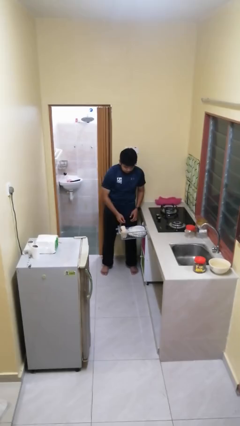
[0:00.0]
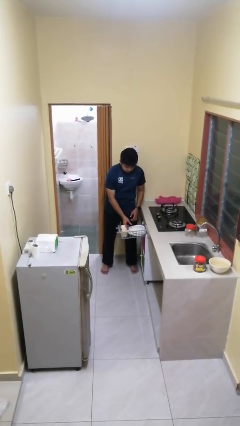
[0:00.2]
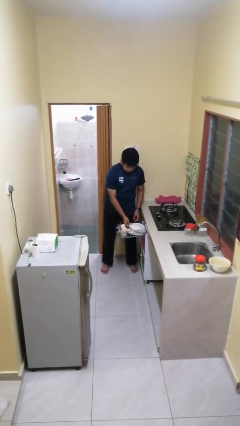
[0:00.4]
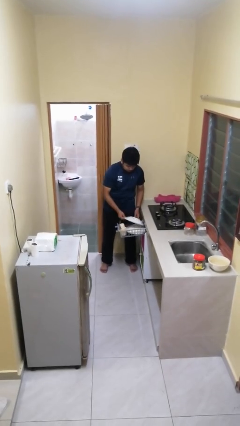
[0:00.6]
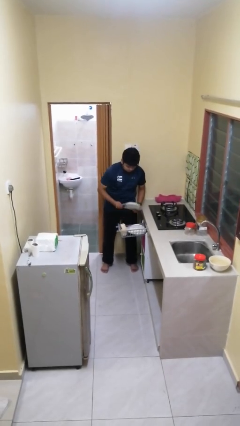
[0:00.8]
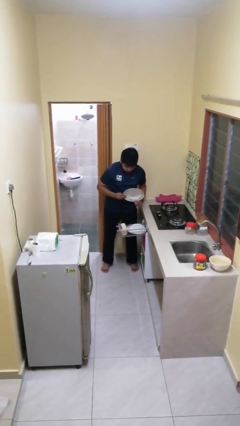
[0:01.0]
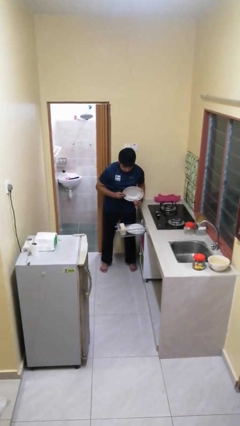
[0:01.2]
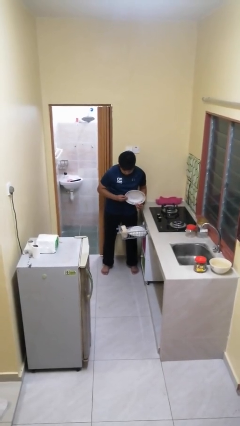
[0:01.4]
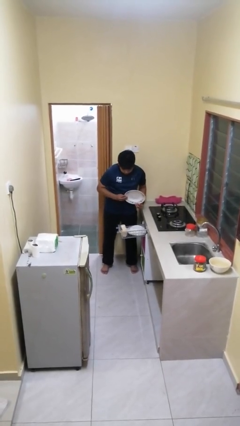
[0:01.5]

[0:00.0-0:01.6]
person takes object from kitchen drawer

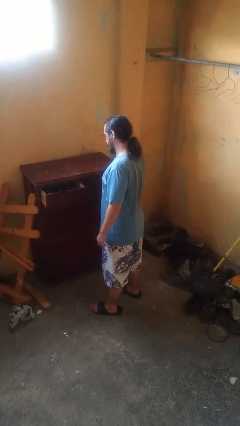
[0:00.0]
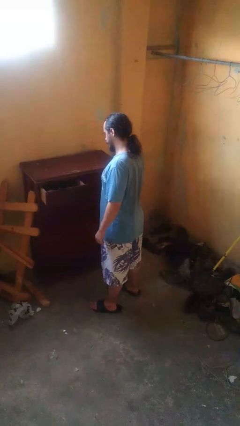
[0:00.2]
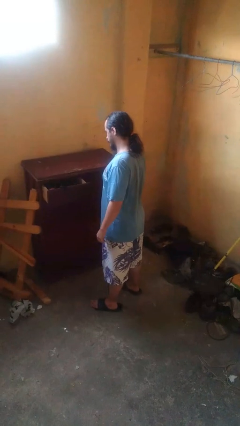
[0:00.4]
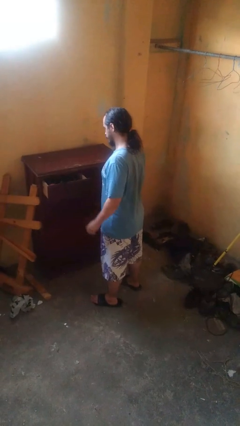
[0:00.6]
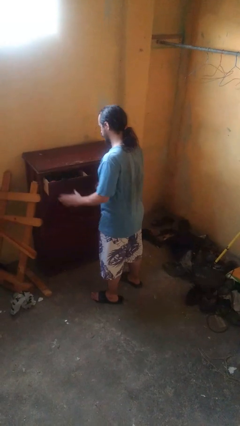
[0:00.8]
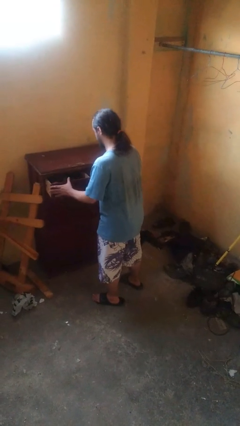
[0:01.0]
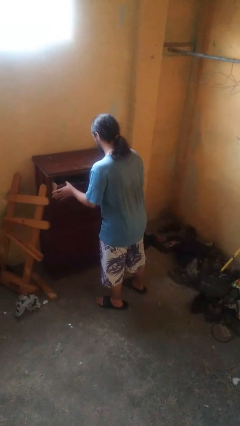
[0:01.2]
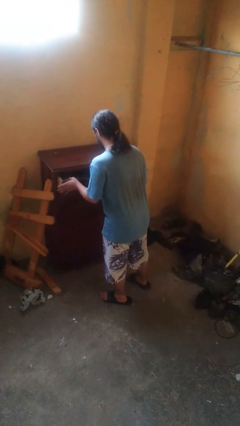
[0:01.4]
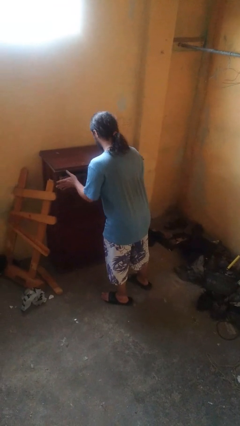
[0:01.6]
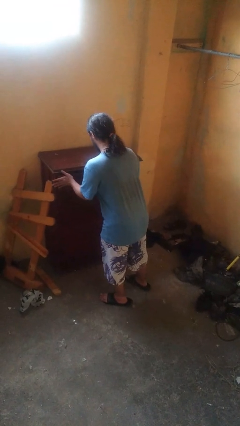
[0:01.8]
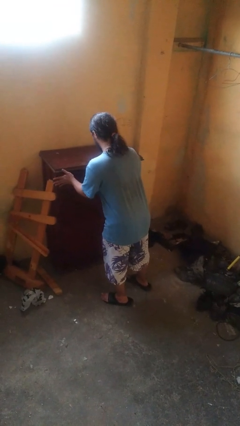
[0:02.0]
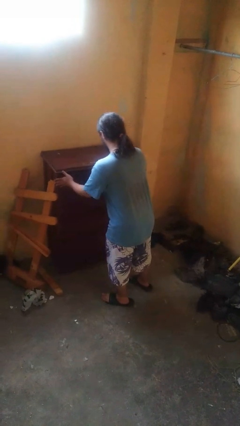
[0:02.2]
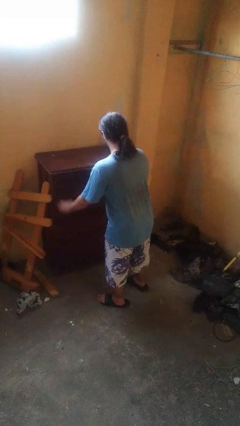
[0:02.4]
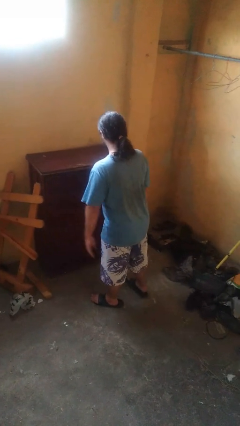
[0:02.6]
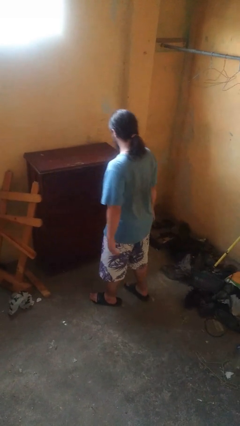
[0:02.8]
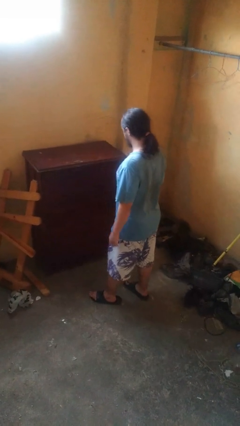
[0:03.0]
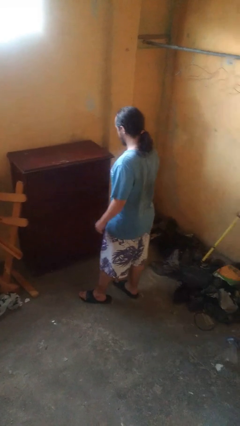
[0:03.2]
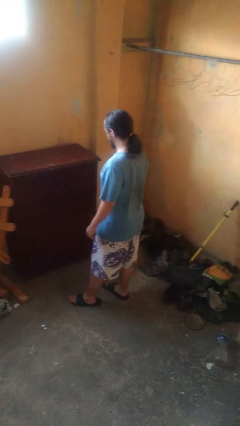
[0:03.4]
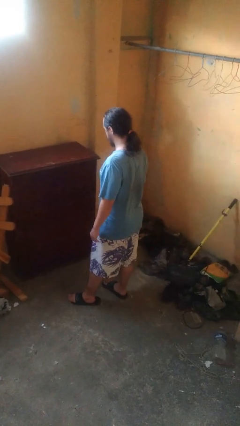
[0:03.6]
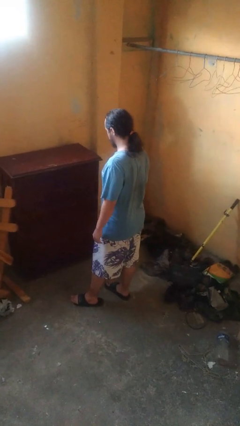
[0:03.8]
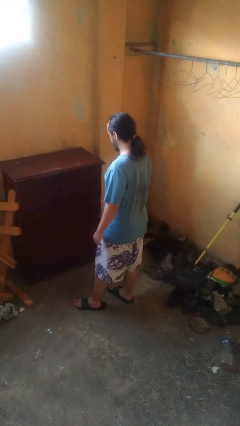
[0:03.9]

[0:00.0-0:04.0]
person closes dresser drawer

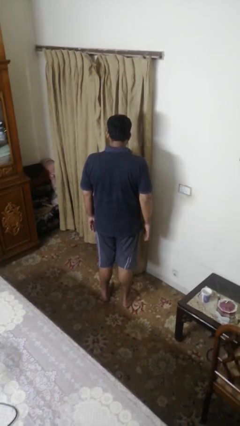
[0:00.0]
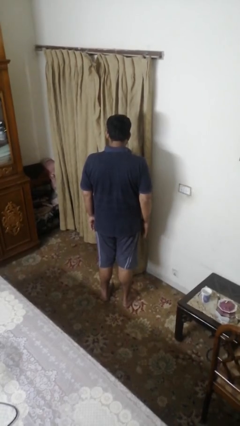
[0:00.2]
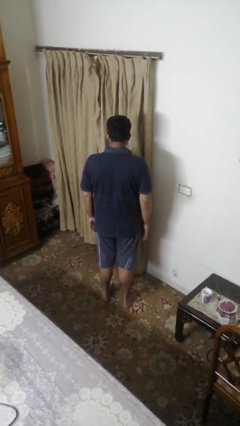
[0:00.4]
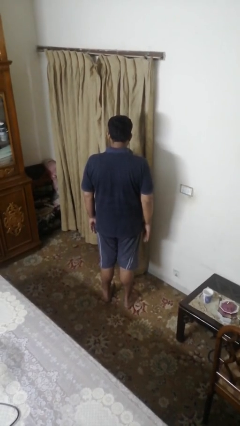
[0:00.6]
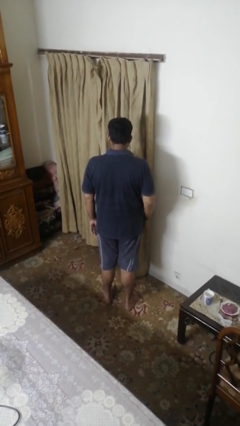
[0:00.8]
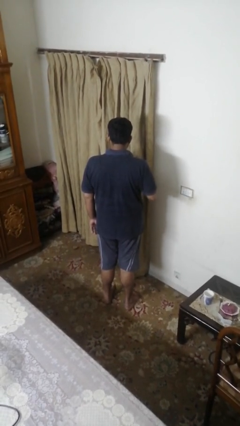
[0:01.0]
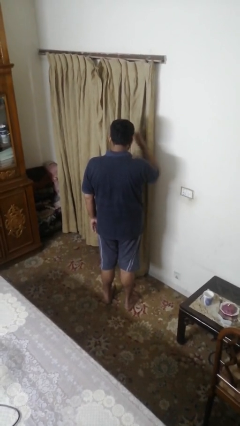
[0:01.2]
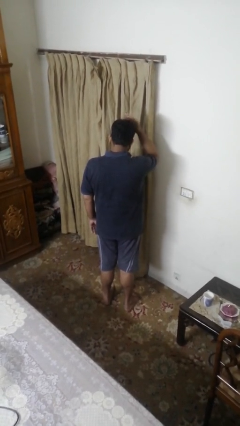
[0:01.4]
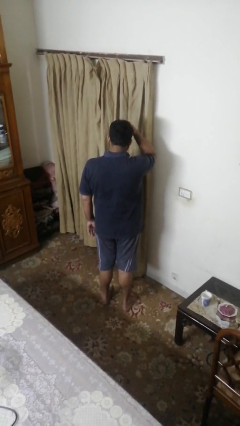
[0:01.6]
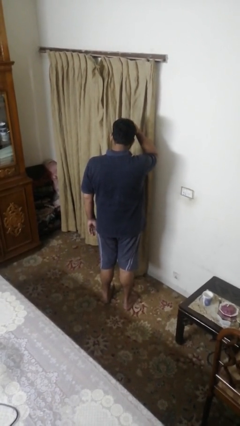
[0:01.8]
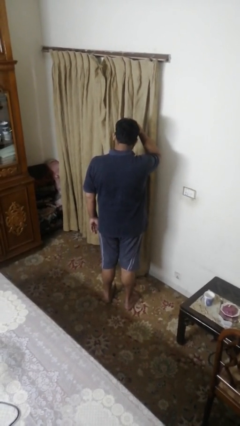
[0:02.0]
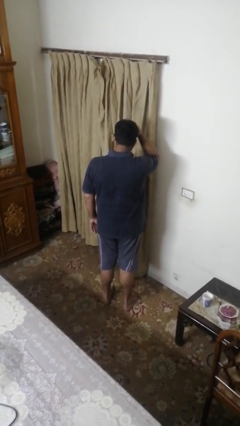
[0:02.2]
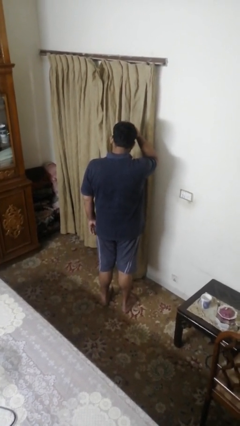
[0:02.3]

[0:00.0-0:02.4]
person pats head

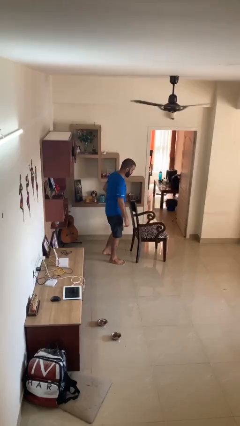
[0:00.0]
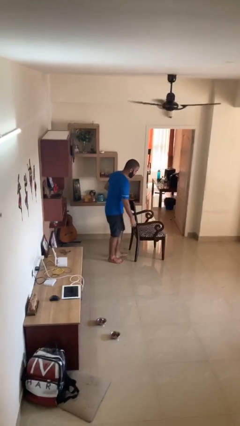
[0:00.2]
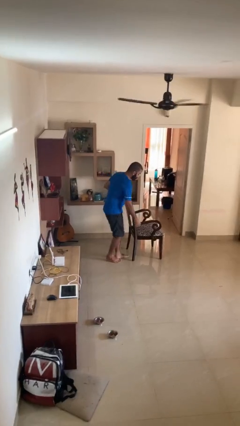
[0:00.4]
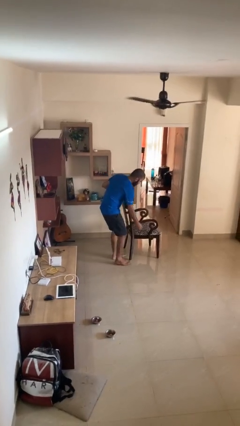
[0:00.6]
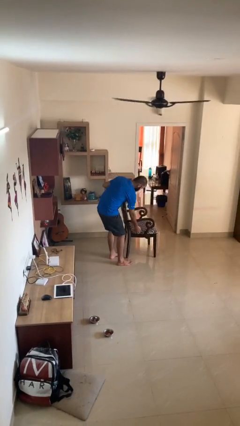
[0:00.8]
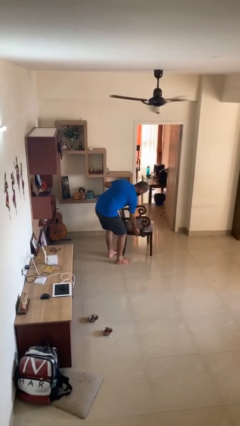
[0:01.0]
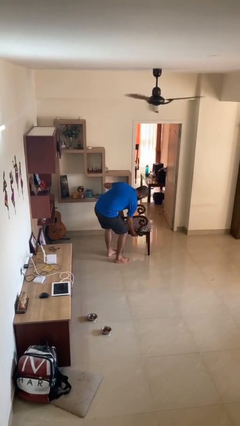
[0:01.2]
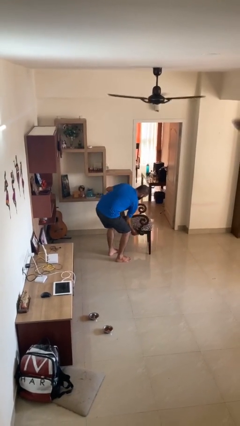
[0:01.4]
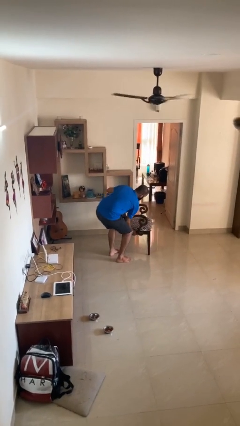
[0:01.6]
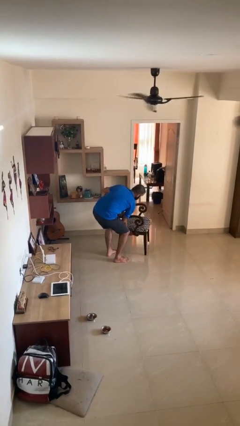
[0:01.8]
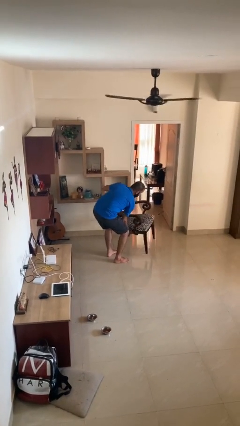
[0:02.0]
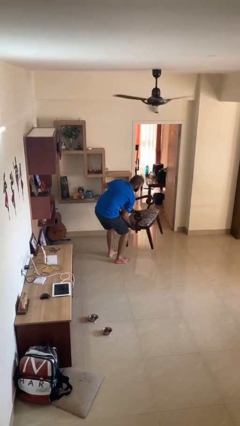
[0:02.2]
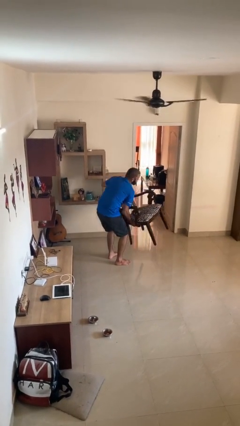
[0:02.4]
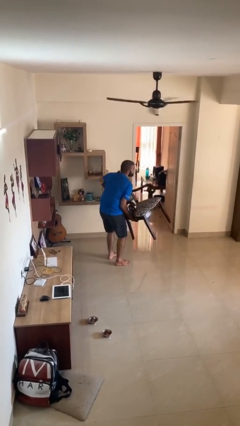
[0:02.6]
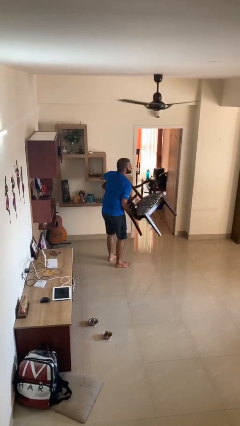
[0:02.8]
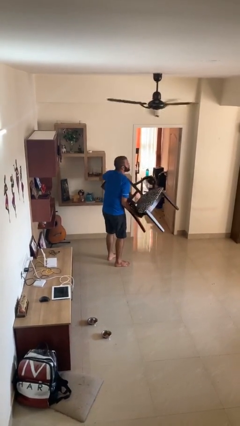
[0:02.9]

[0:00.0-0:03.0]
person picks up object from floor

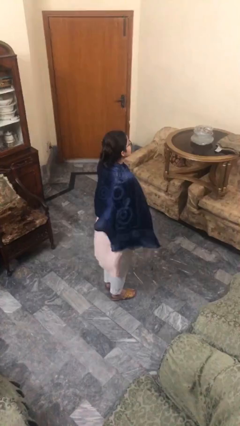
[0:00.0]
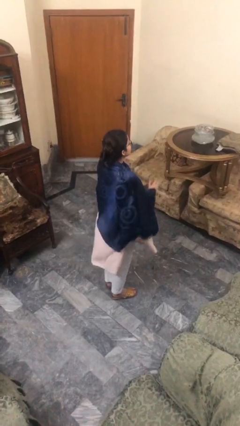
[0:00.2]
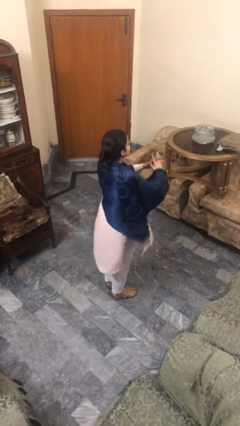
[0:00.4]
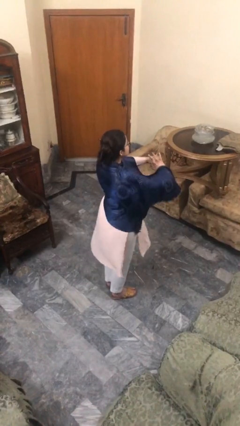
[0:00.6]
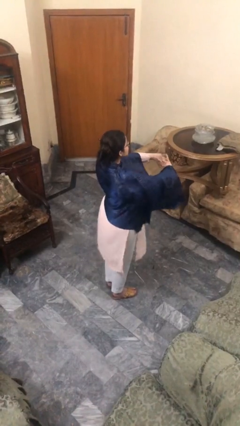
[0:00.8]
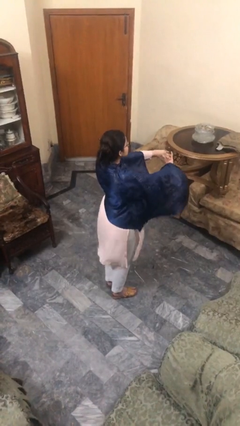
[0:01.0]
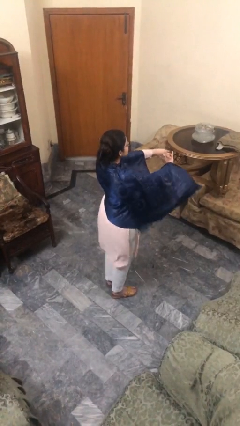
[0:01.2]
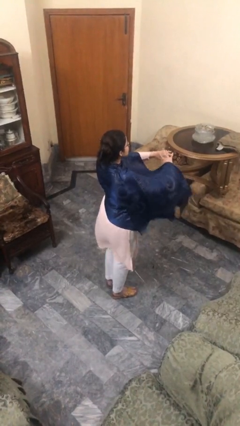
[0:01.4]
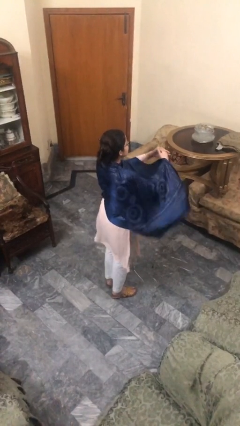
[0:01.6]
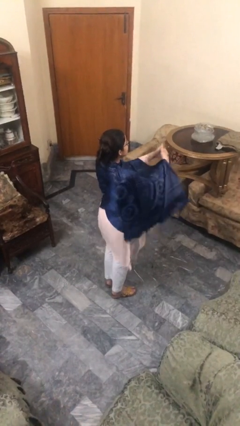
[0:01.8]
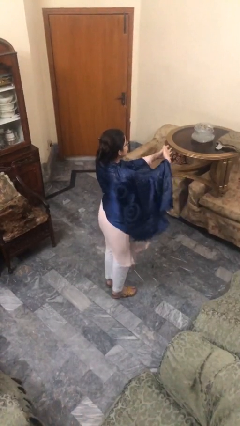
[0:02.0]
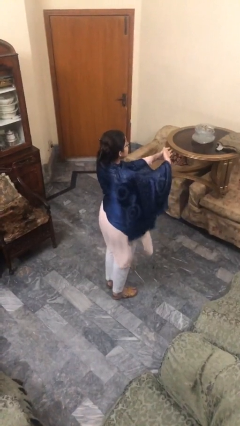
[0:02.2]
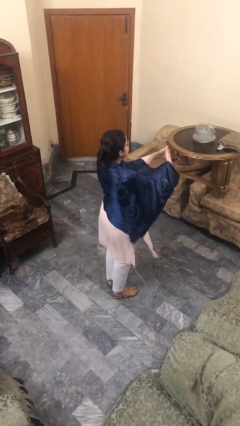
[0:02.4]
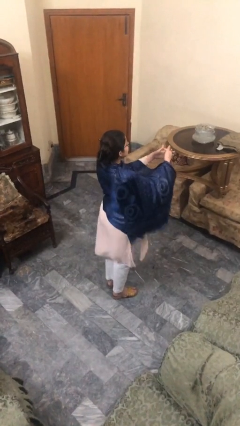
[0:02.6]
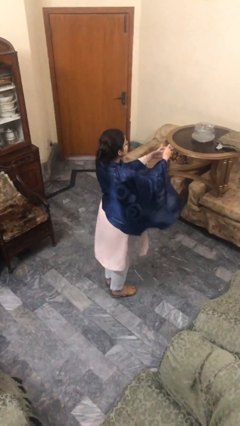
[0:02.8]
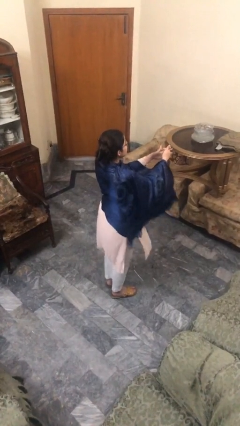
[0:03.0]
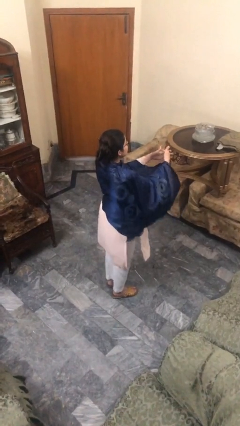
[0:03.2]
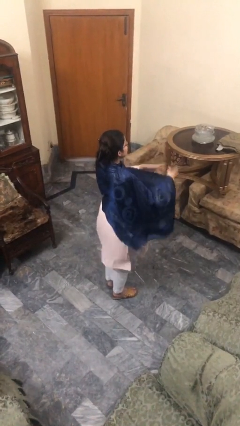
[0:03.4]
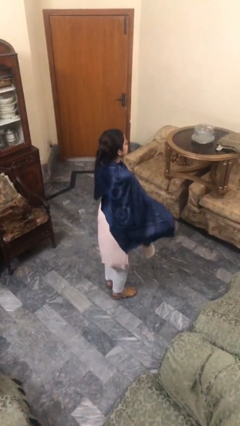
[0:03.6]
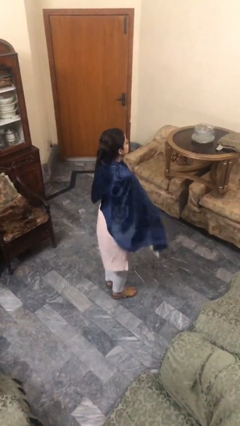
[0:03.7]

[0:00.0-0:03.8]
person cracks knuckles

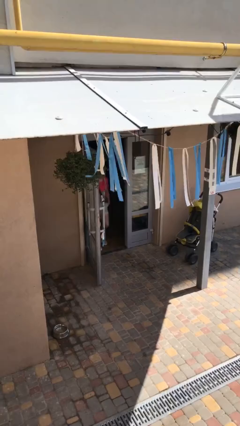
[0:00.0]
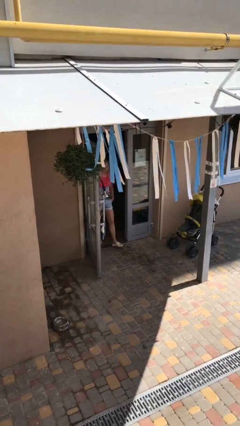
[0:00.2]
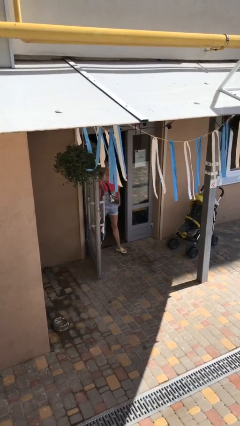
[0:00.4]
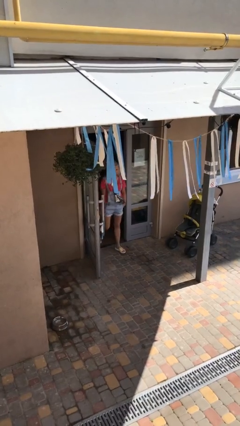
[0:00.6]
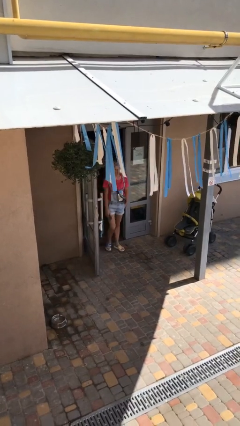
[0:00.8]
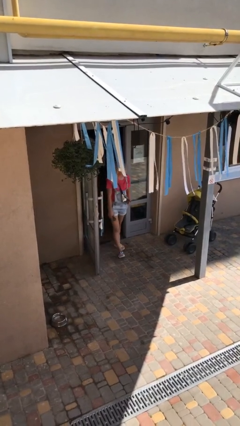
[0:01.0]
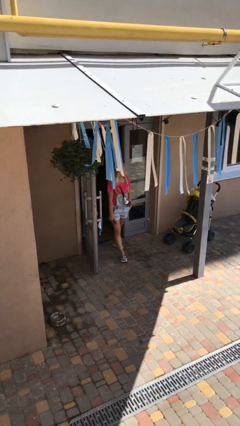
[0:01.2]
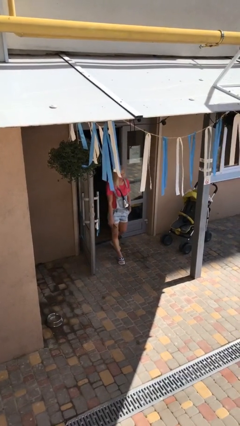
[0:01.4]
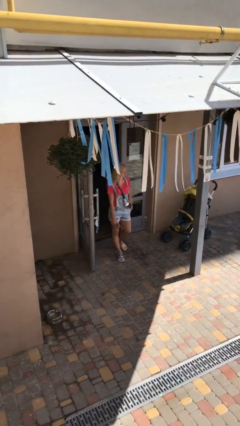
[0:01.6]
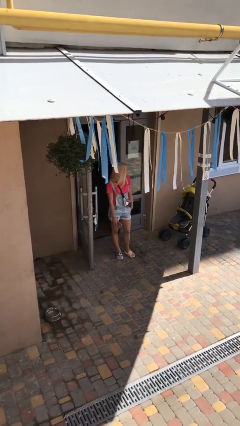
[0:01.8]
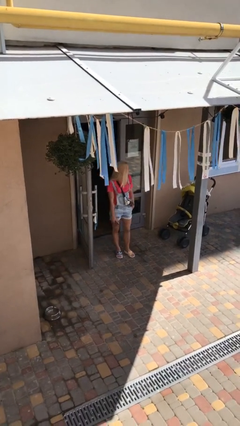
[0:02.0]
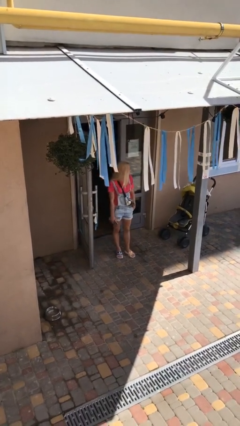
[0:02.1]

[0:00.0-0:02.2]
person enters scene through structure

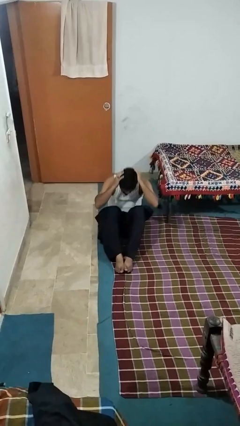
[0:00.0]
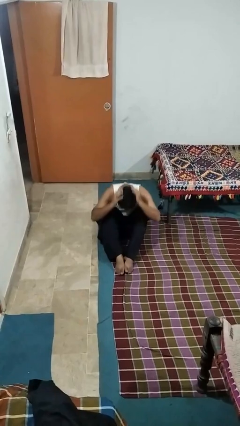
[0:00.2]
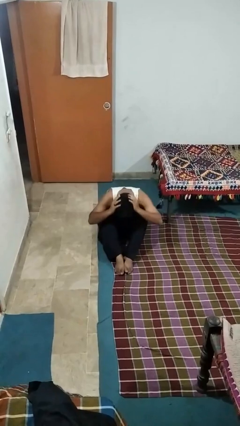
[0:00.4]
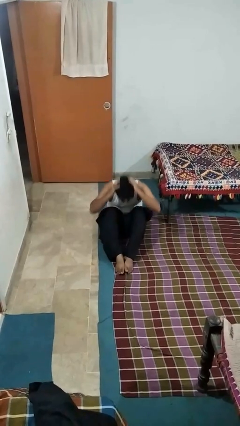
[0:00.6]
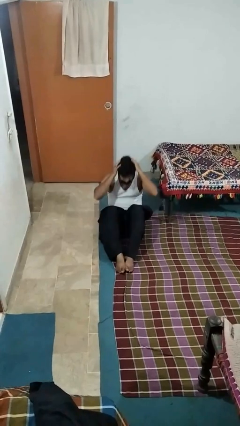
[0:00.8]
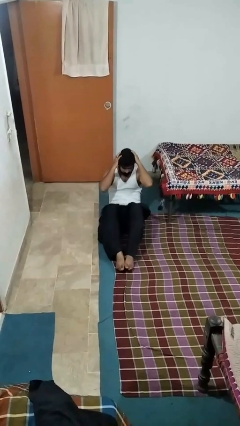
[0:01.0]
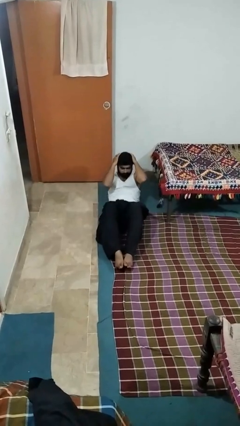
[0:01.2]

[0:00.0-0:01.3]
person exercises with situp
